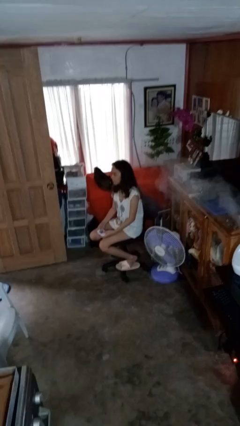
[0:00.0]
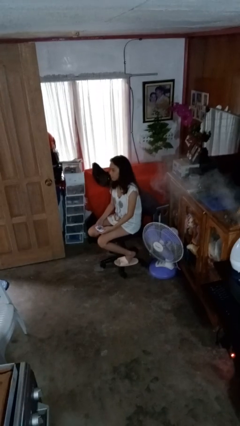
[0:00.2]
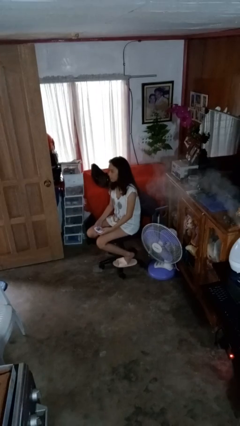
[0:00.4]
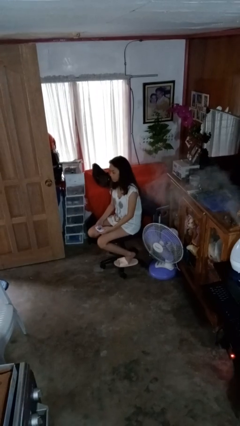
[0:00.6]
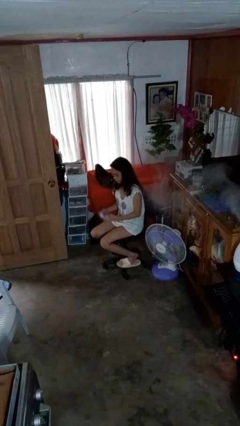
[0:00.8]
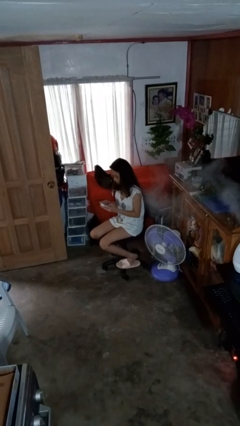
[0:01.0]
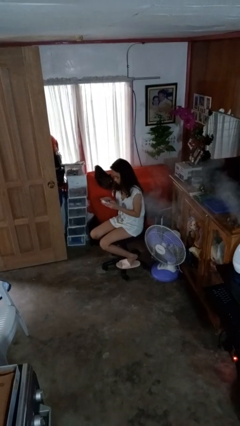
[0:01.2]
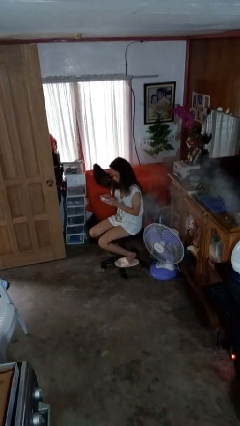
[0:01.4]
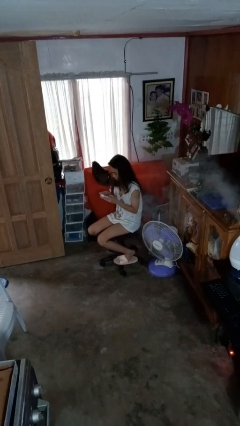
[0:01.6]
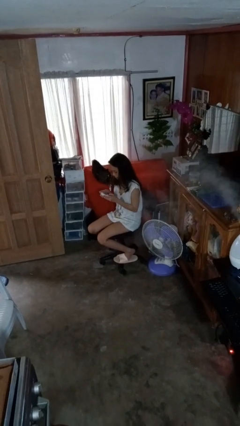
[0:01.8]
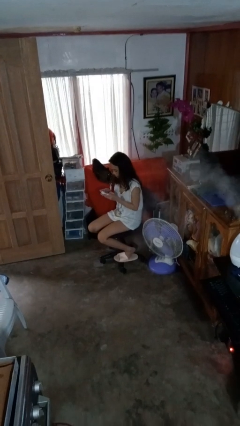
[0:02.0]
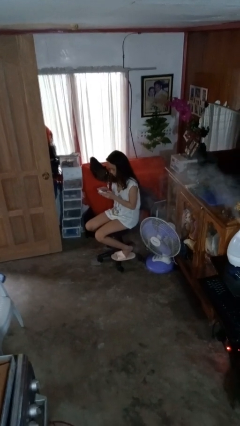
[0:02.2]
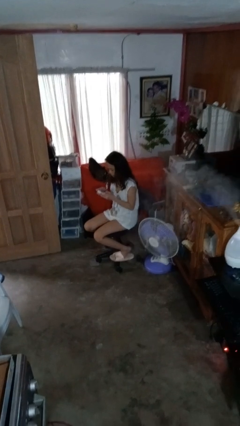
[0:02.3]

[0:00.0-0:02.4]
person interacts with handheld game

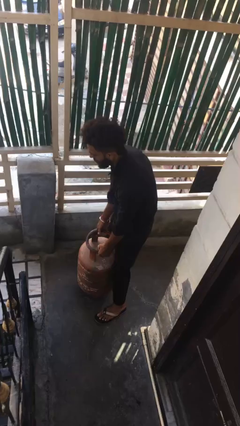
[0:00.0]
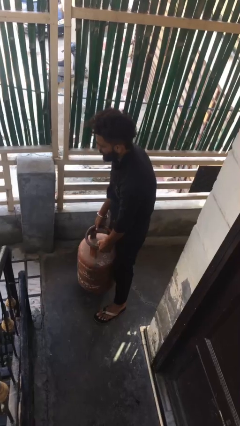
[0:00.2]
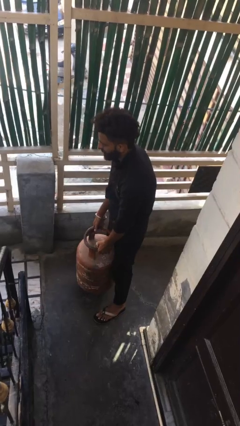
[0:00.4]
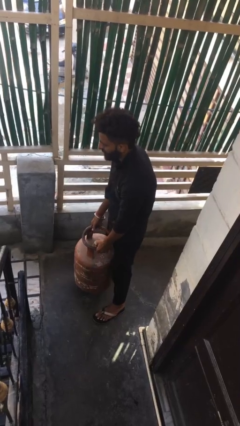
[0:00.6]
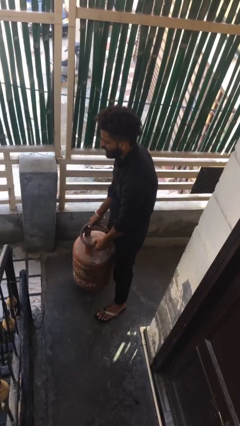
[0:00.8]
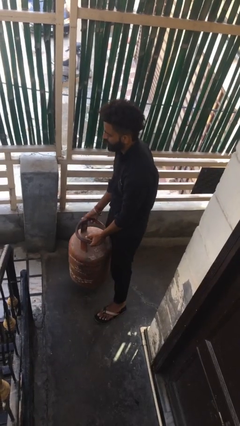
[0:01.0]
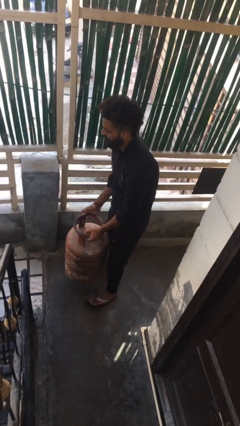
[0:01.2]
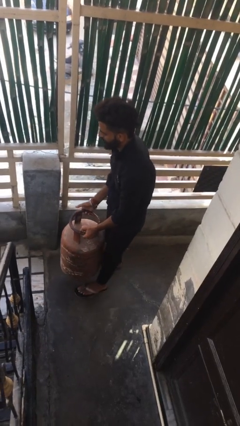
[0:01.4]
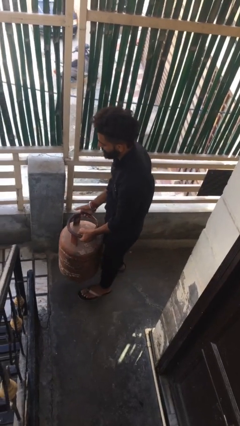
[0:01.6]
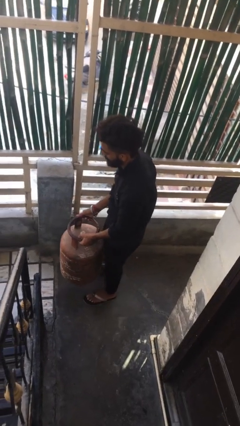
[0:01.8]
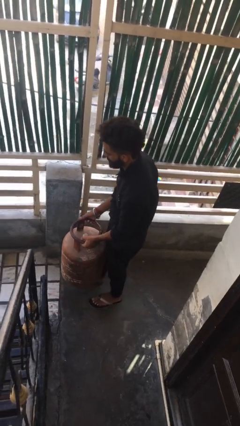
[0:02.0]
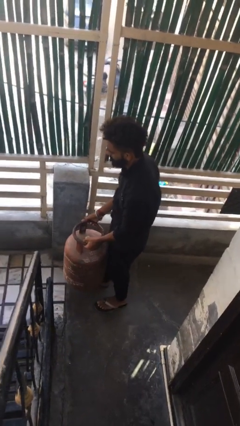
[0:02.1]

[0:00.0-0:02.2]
person picks up object from floor

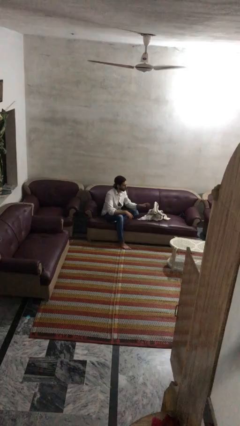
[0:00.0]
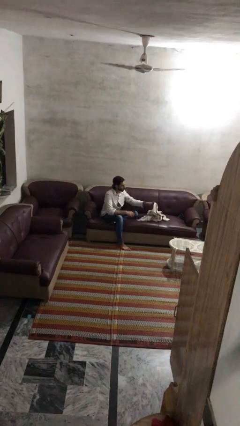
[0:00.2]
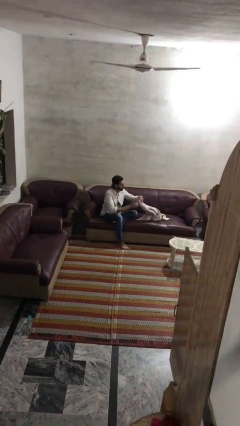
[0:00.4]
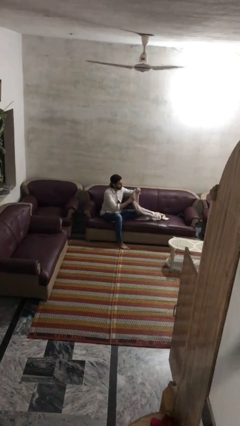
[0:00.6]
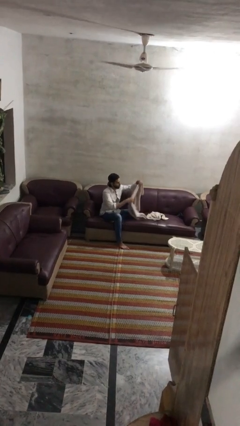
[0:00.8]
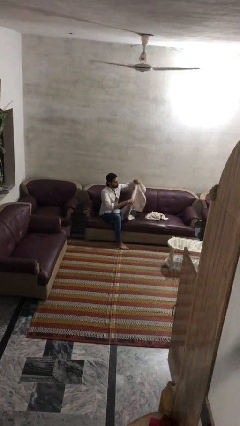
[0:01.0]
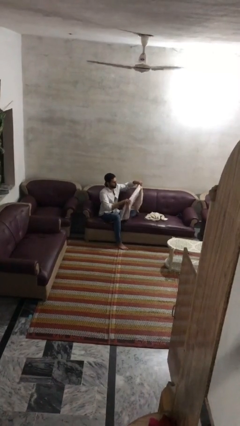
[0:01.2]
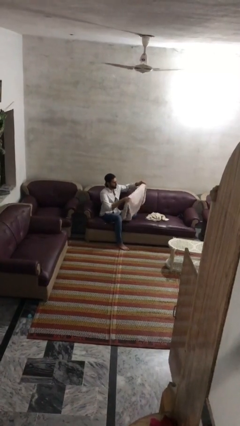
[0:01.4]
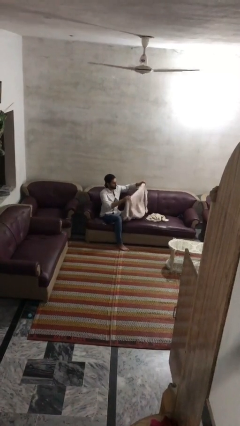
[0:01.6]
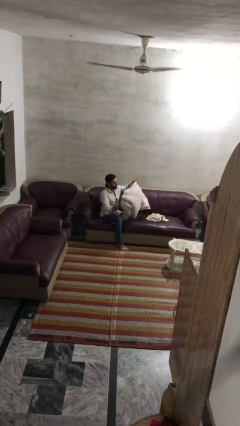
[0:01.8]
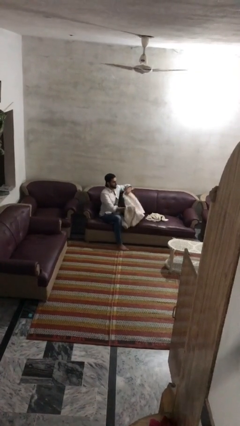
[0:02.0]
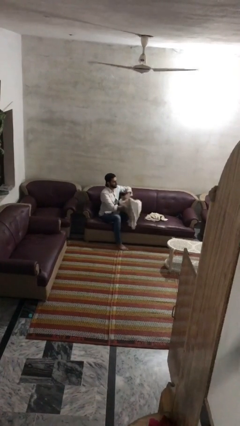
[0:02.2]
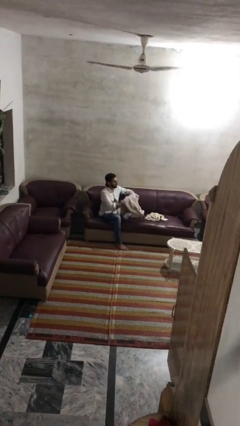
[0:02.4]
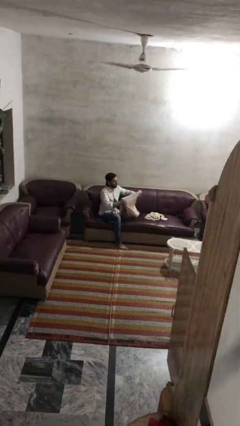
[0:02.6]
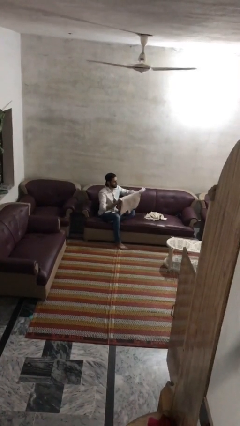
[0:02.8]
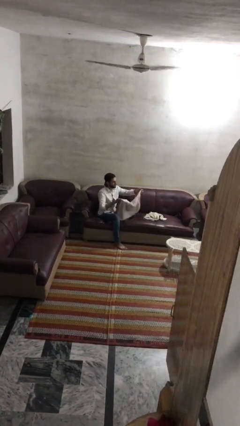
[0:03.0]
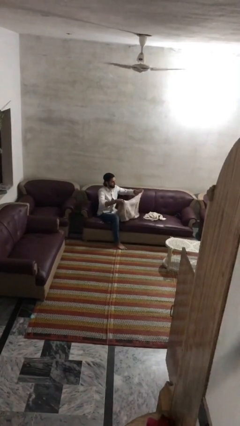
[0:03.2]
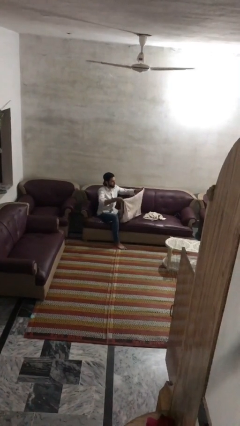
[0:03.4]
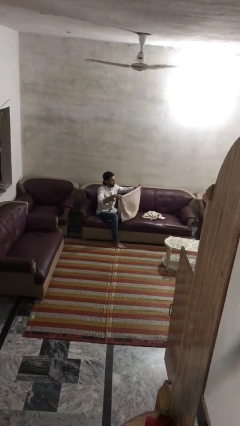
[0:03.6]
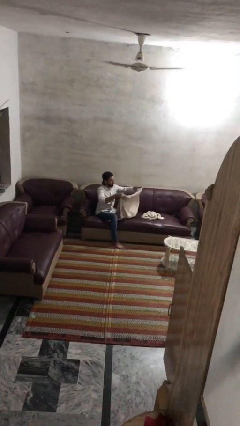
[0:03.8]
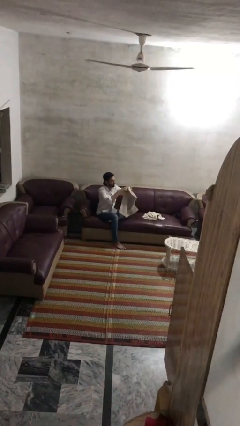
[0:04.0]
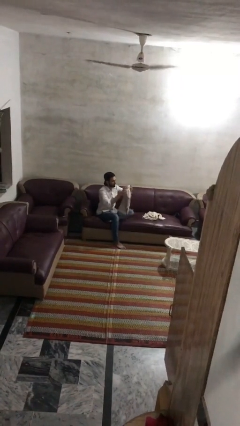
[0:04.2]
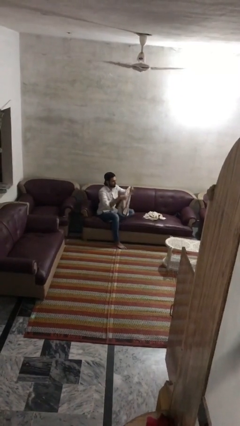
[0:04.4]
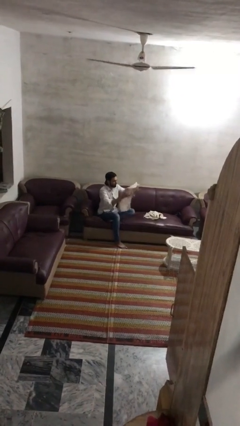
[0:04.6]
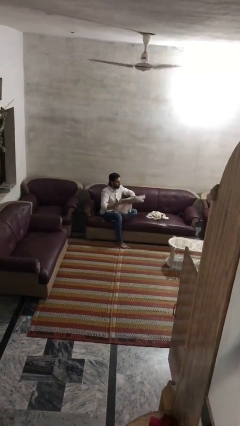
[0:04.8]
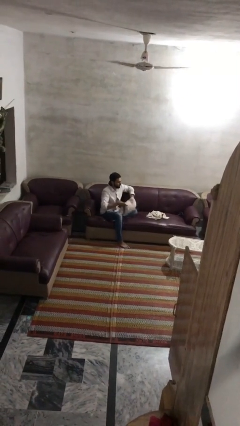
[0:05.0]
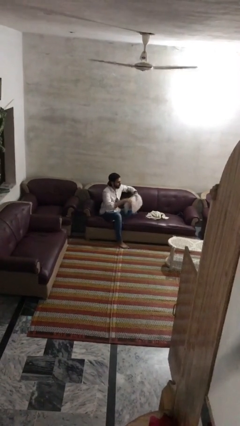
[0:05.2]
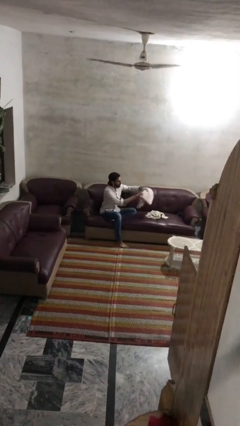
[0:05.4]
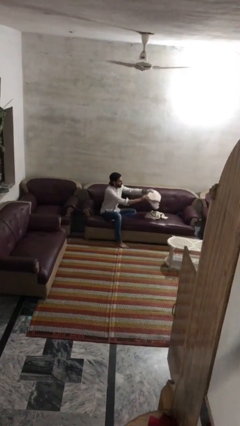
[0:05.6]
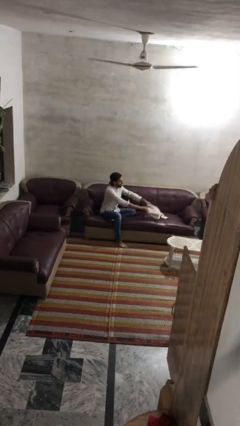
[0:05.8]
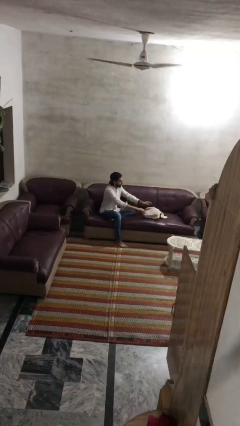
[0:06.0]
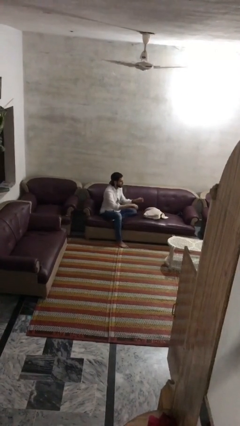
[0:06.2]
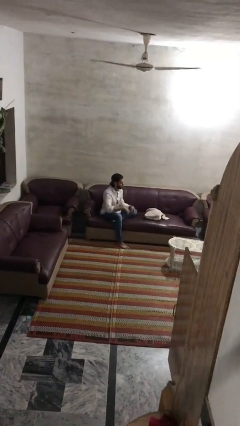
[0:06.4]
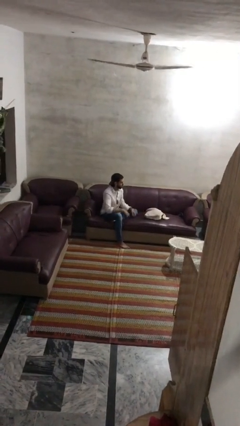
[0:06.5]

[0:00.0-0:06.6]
person folds towel

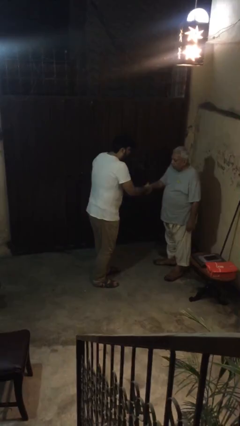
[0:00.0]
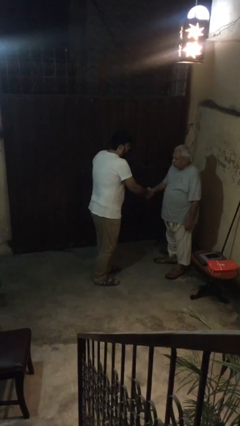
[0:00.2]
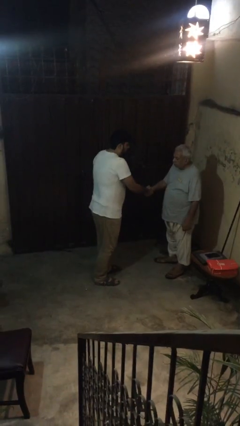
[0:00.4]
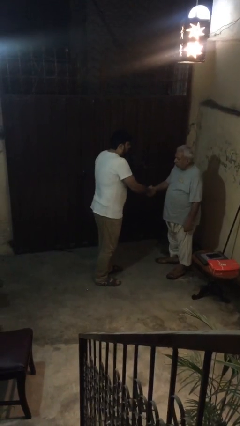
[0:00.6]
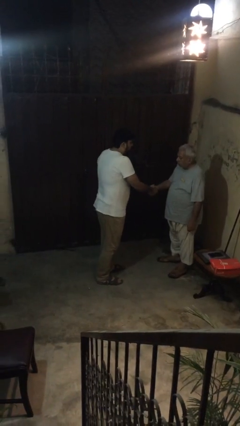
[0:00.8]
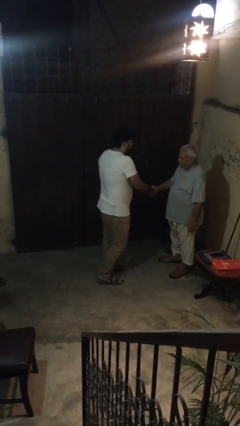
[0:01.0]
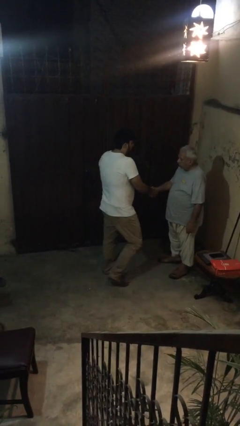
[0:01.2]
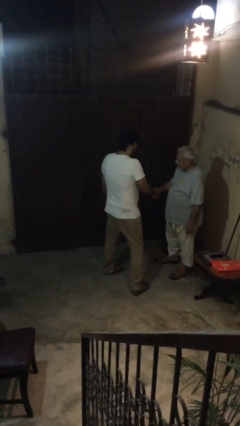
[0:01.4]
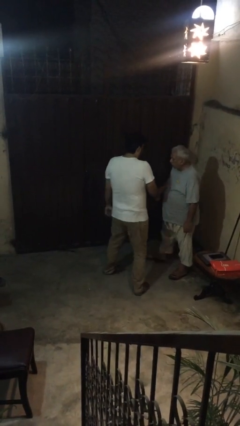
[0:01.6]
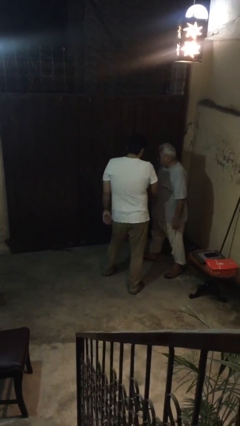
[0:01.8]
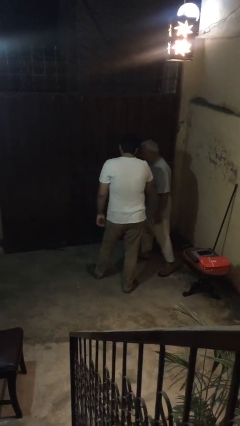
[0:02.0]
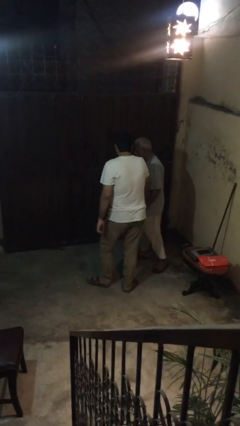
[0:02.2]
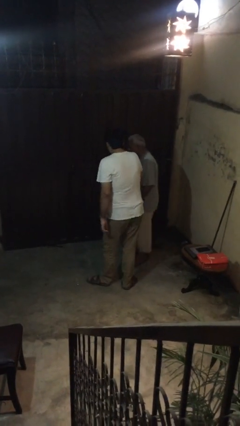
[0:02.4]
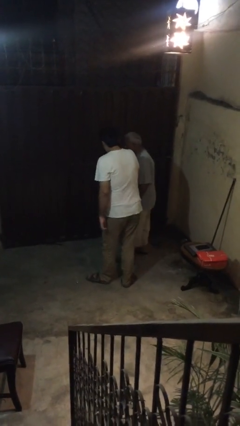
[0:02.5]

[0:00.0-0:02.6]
person shakes hand

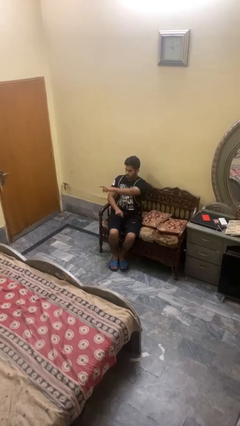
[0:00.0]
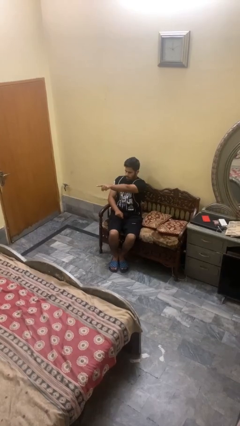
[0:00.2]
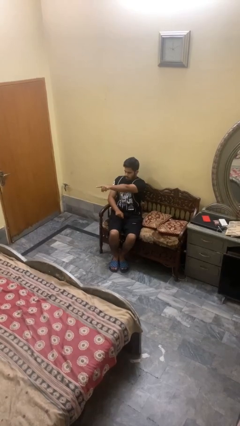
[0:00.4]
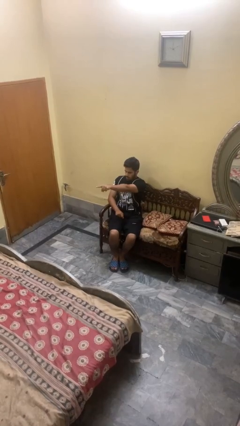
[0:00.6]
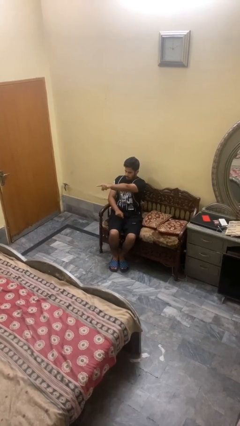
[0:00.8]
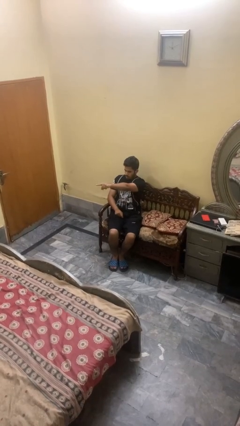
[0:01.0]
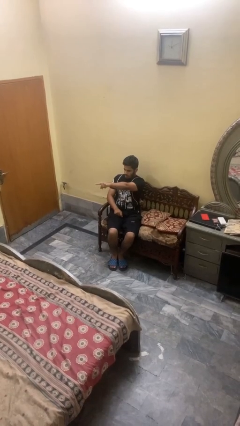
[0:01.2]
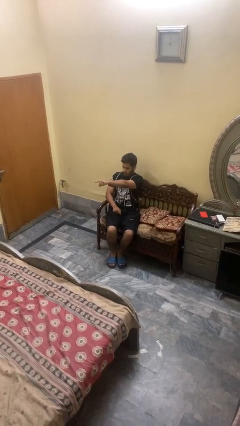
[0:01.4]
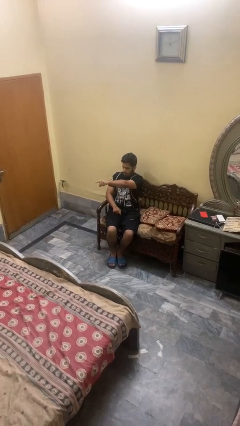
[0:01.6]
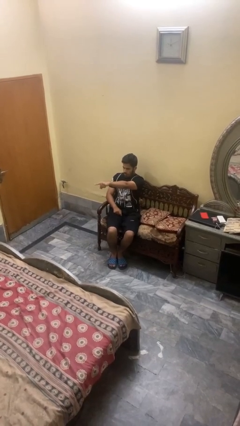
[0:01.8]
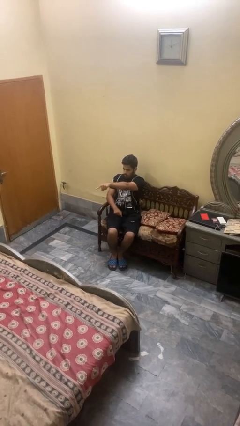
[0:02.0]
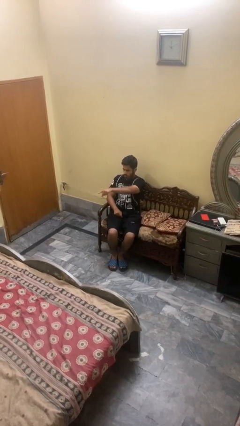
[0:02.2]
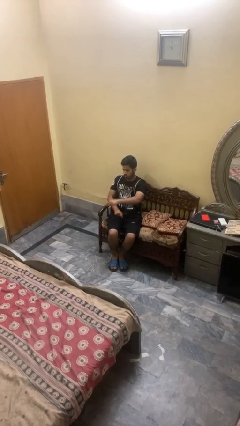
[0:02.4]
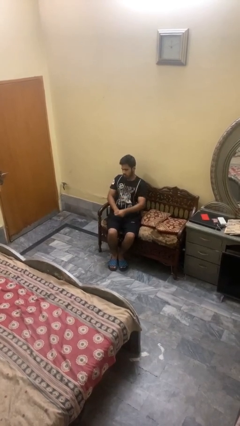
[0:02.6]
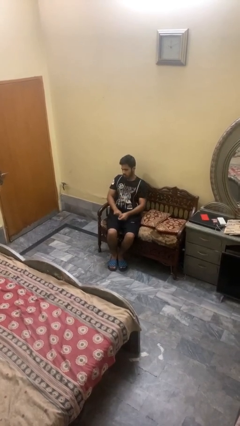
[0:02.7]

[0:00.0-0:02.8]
person points at person

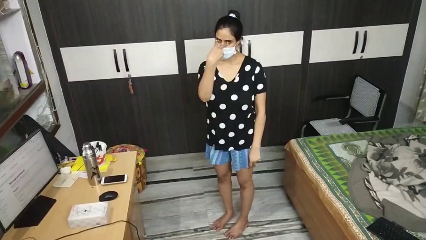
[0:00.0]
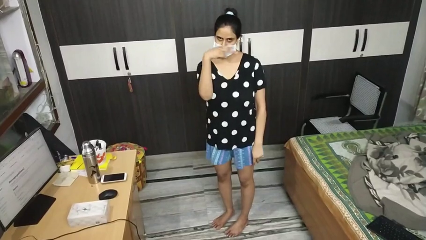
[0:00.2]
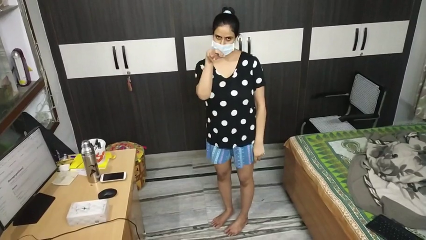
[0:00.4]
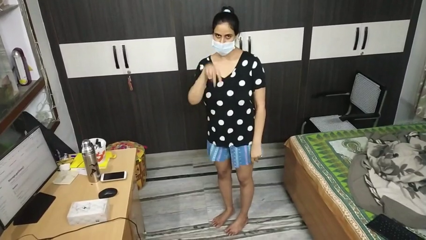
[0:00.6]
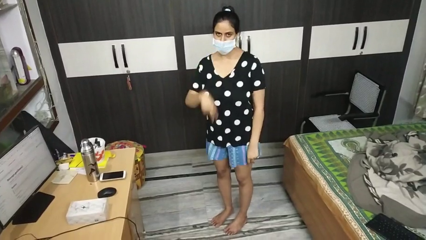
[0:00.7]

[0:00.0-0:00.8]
person gestures watch closely

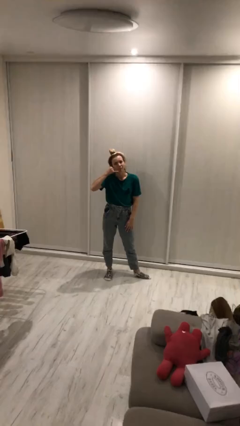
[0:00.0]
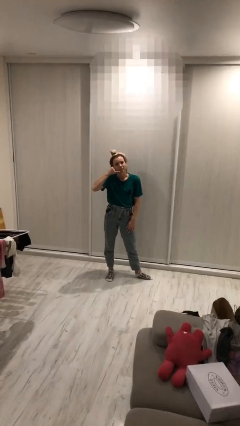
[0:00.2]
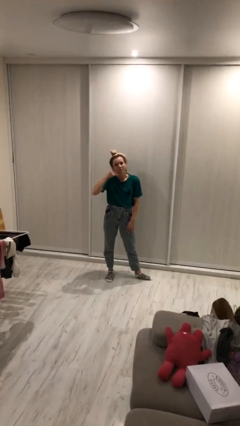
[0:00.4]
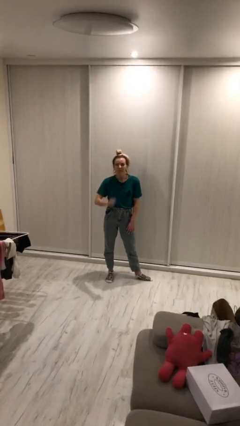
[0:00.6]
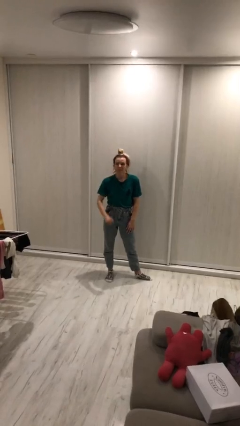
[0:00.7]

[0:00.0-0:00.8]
person gestures call me
